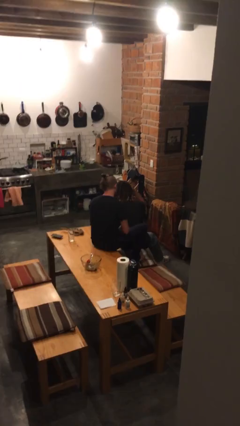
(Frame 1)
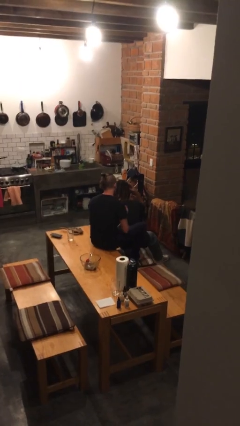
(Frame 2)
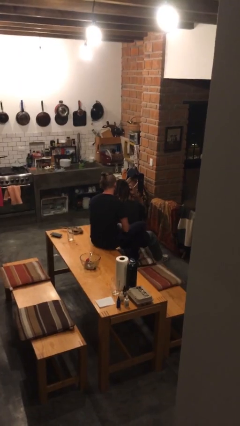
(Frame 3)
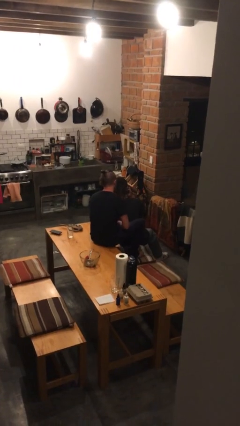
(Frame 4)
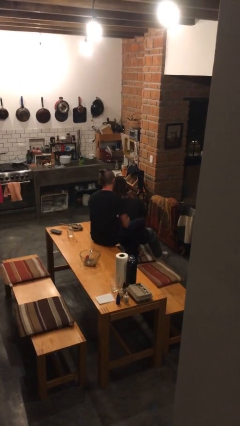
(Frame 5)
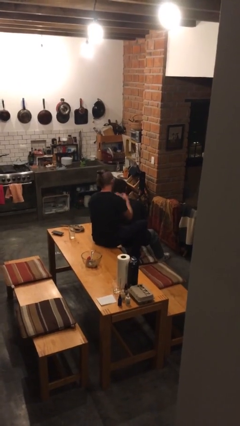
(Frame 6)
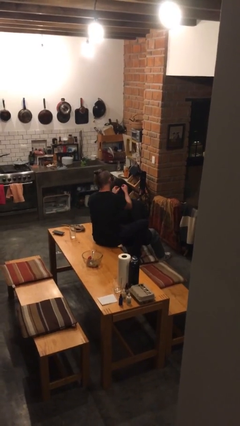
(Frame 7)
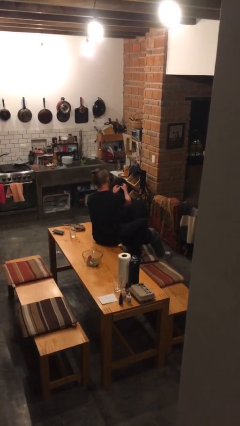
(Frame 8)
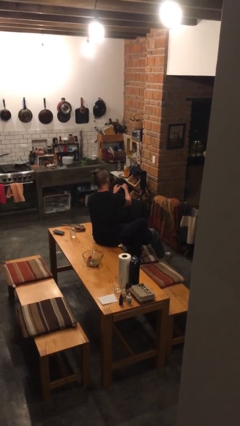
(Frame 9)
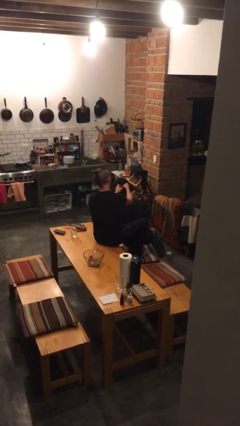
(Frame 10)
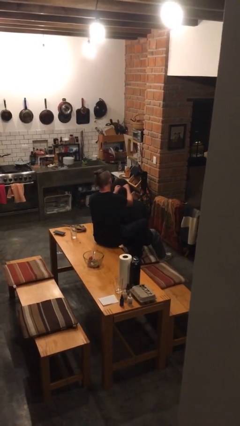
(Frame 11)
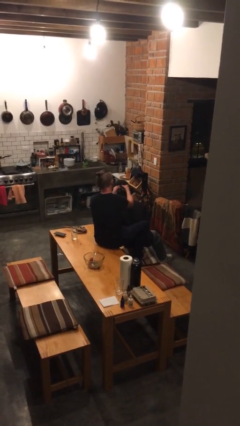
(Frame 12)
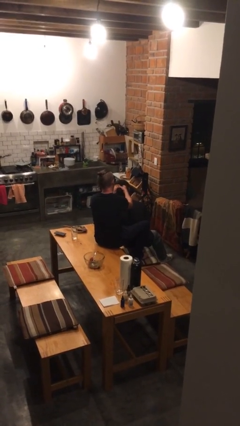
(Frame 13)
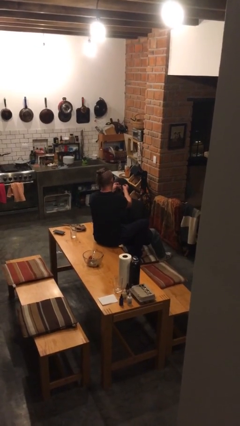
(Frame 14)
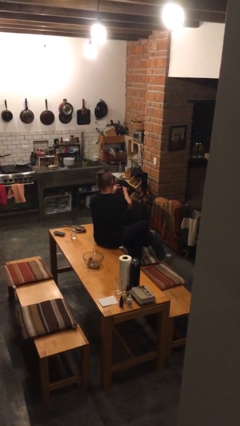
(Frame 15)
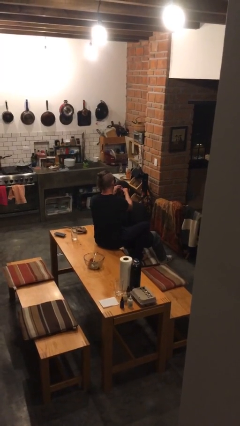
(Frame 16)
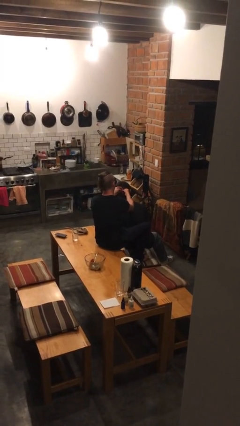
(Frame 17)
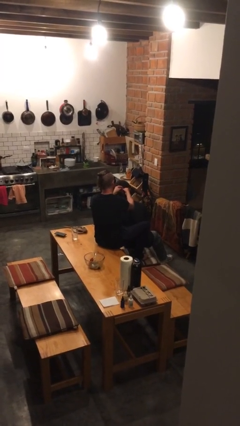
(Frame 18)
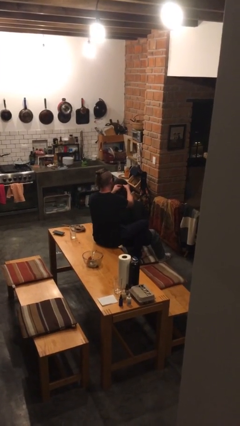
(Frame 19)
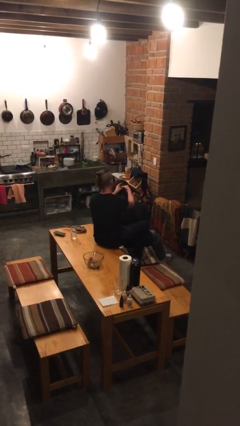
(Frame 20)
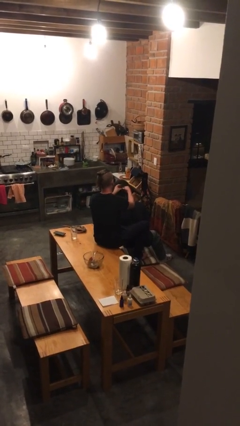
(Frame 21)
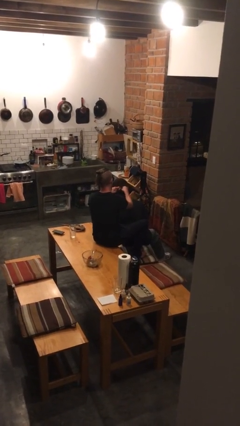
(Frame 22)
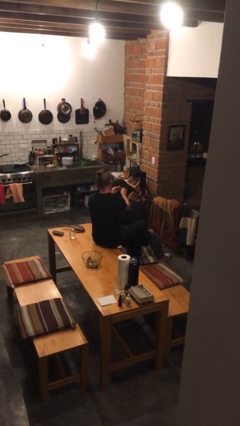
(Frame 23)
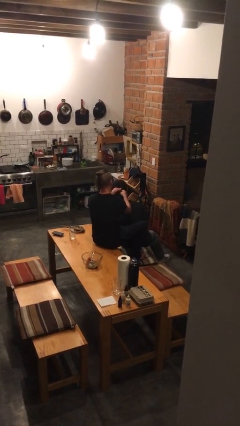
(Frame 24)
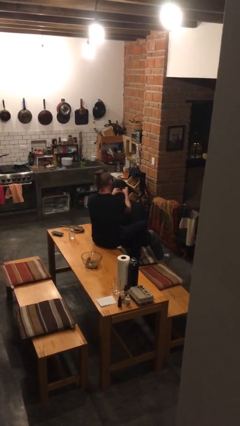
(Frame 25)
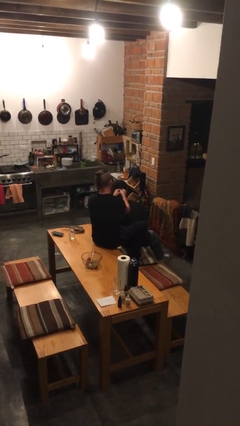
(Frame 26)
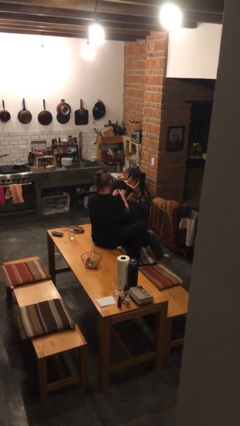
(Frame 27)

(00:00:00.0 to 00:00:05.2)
person braids hair of person

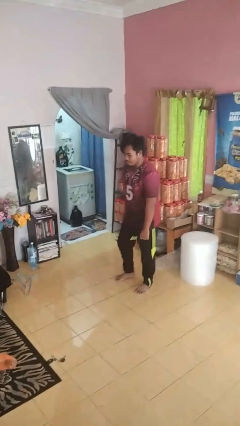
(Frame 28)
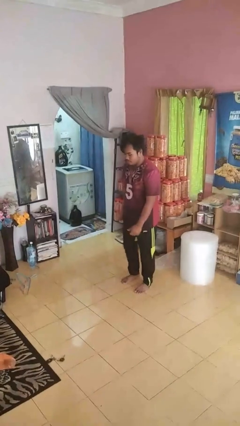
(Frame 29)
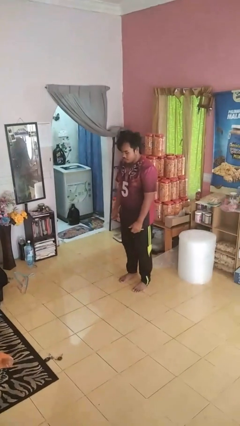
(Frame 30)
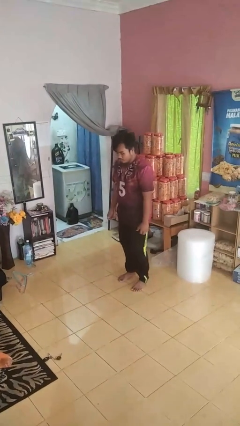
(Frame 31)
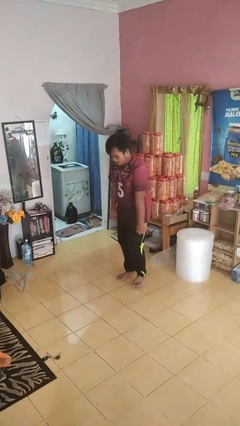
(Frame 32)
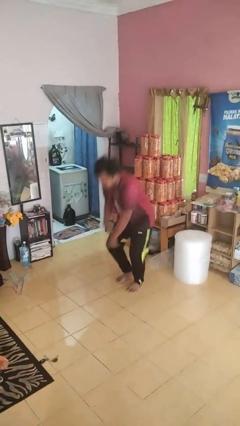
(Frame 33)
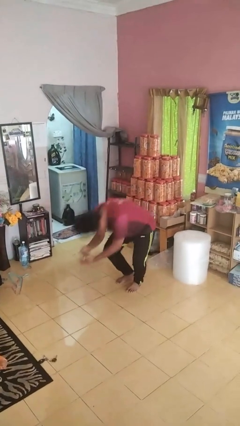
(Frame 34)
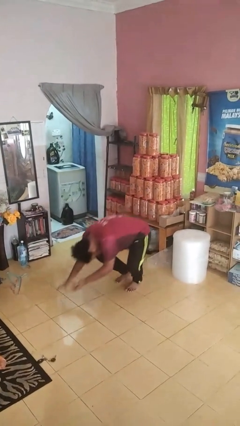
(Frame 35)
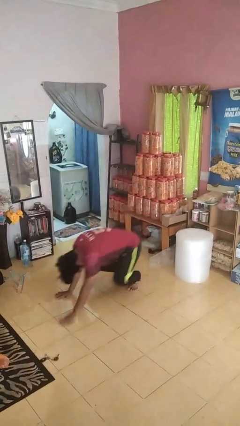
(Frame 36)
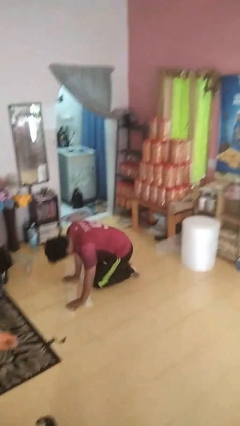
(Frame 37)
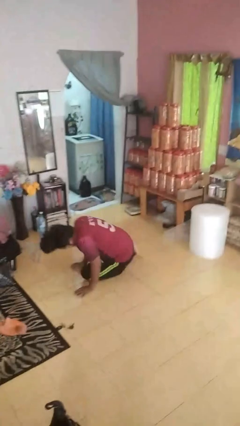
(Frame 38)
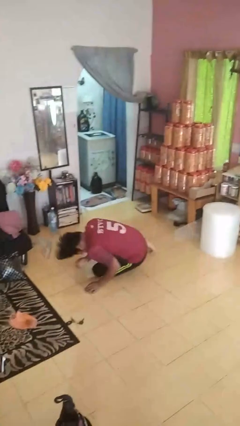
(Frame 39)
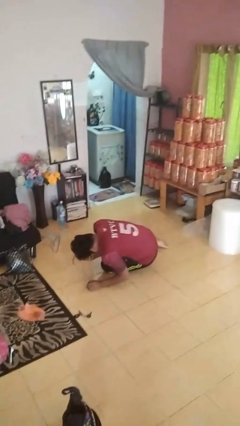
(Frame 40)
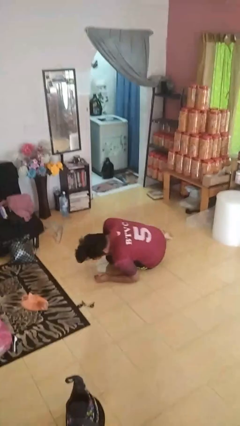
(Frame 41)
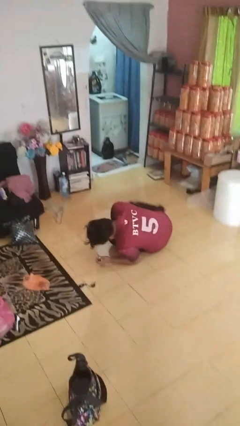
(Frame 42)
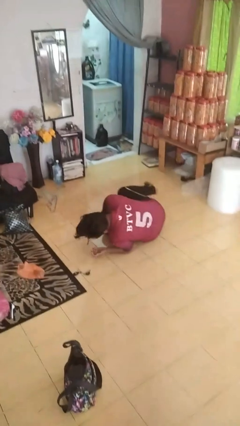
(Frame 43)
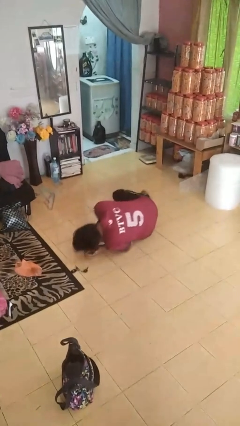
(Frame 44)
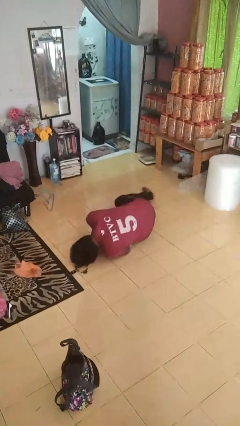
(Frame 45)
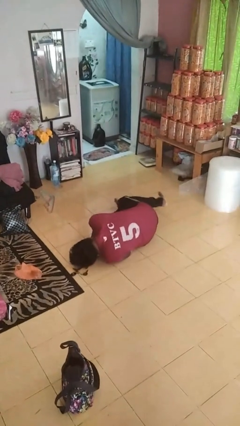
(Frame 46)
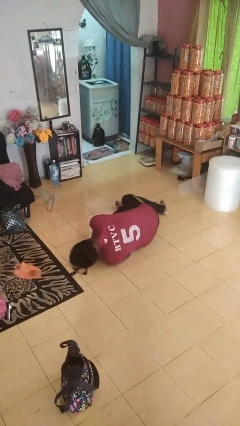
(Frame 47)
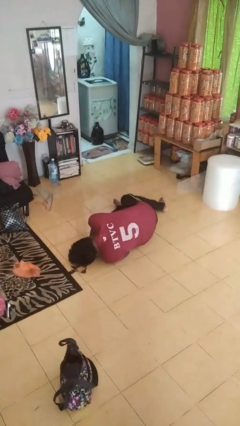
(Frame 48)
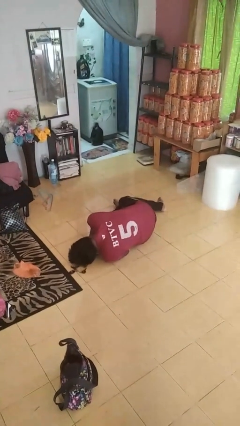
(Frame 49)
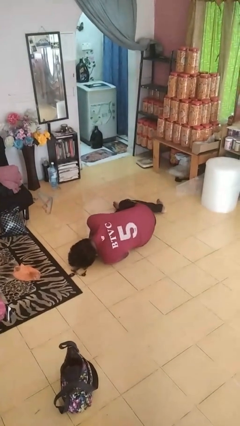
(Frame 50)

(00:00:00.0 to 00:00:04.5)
person falls while standing

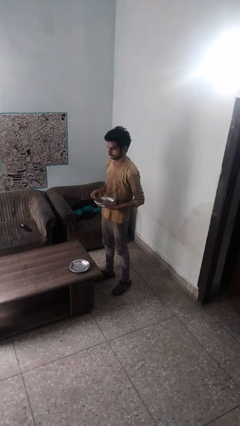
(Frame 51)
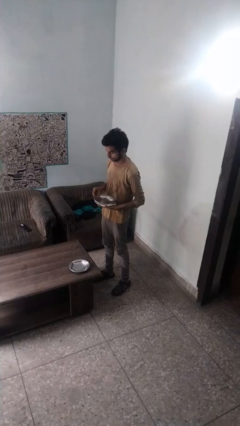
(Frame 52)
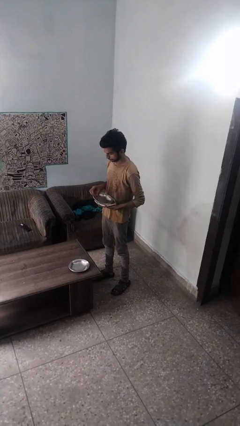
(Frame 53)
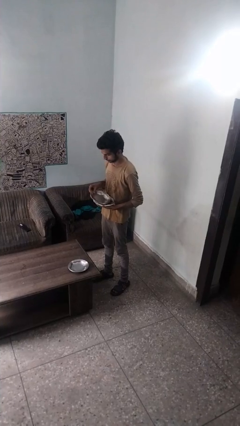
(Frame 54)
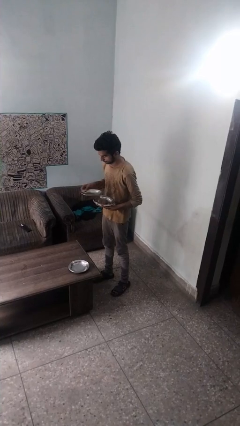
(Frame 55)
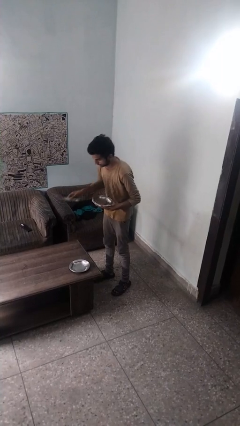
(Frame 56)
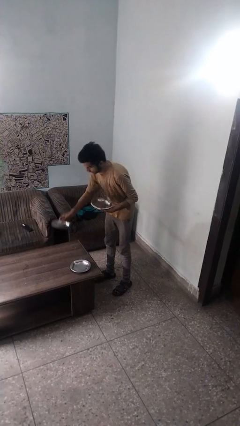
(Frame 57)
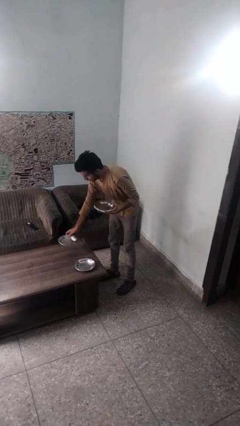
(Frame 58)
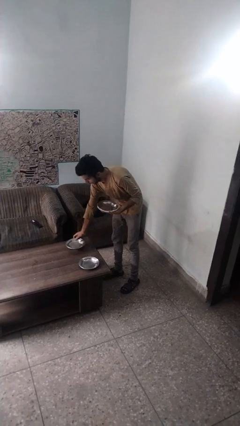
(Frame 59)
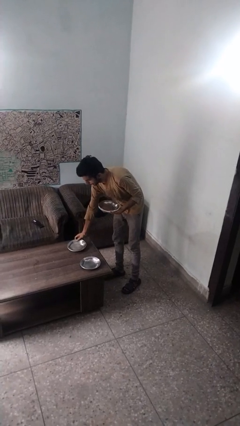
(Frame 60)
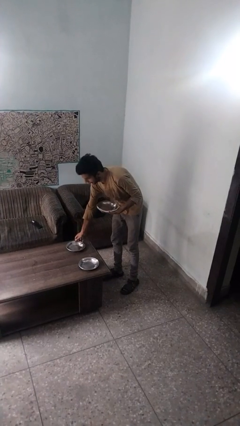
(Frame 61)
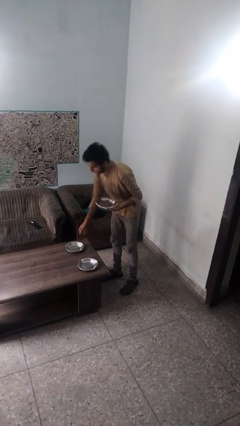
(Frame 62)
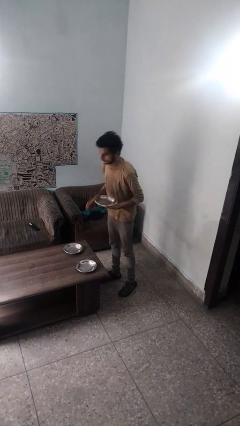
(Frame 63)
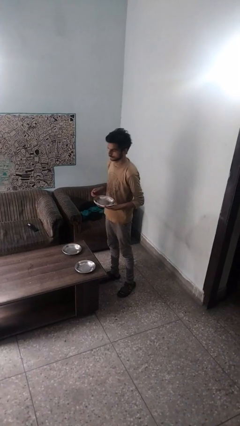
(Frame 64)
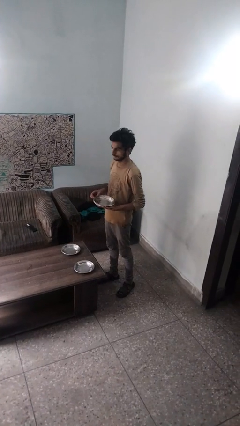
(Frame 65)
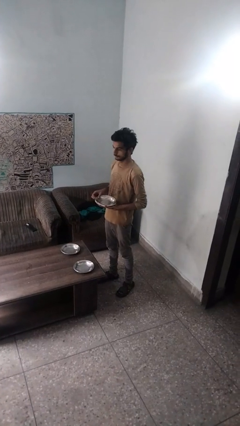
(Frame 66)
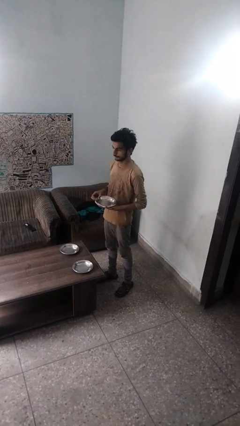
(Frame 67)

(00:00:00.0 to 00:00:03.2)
person sets table

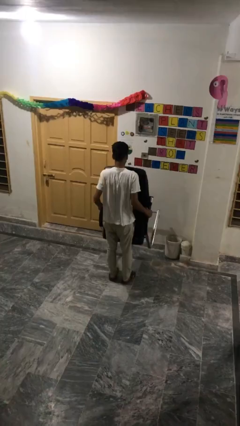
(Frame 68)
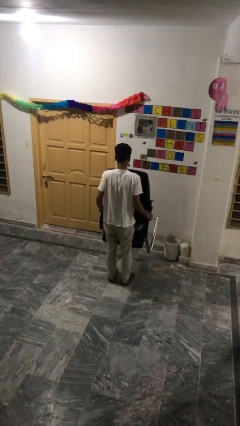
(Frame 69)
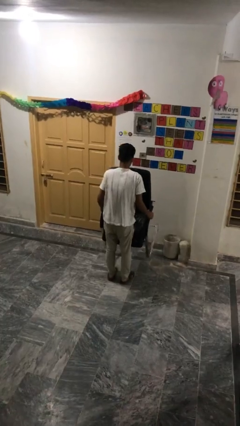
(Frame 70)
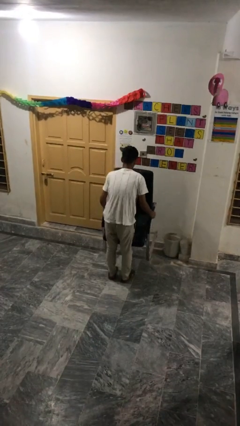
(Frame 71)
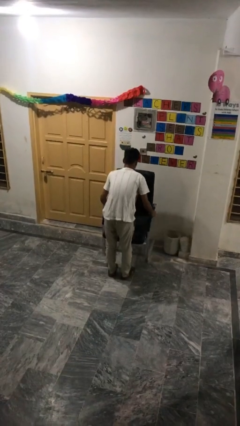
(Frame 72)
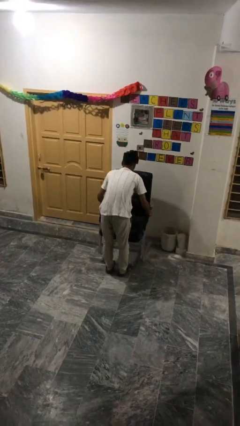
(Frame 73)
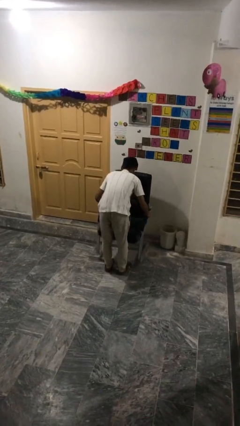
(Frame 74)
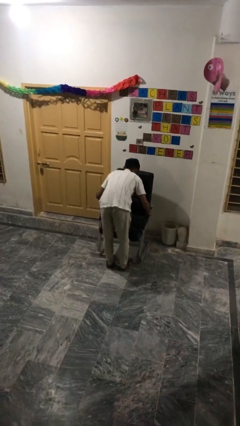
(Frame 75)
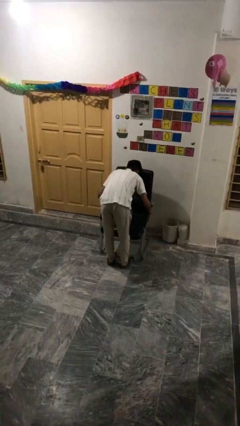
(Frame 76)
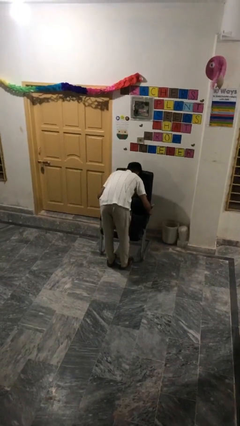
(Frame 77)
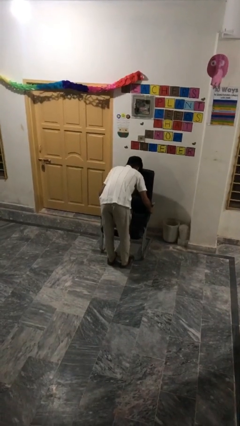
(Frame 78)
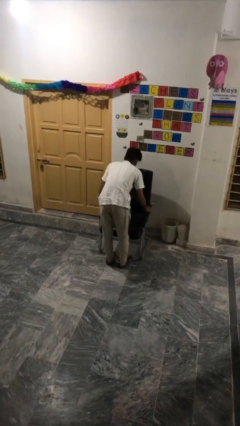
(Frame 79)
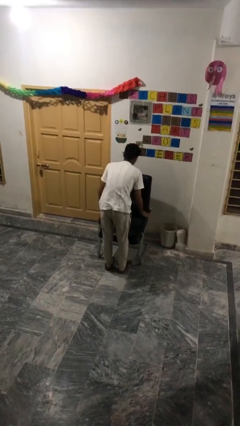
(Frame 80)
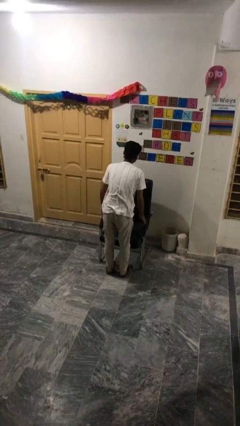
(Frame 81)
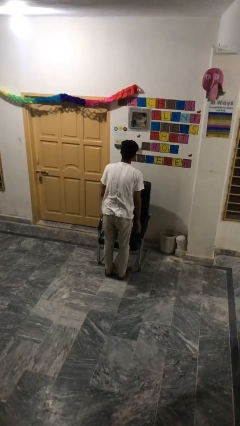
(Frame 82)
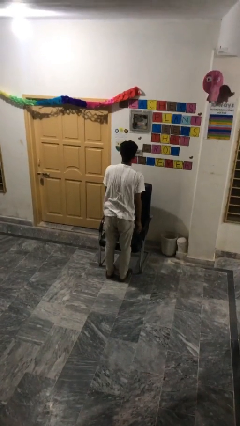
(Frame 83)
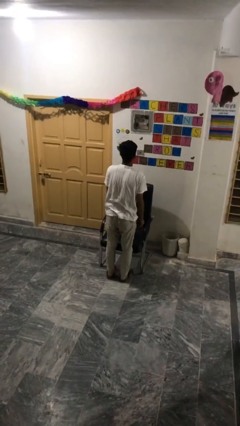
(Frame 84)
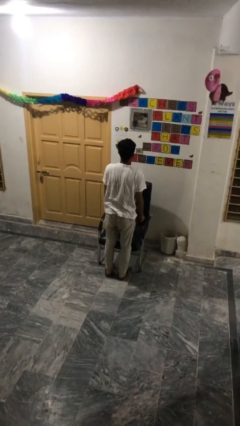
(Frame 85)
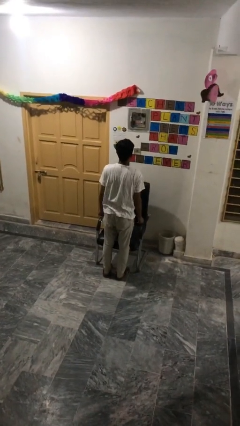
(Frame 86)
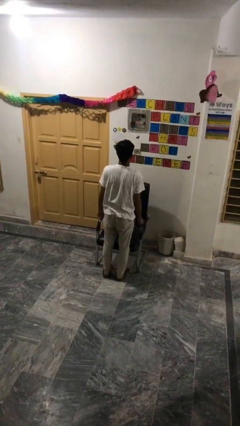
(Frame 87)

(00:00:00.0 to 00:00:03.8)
person puts down object on floor

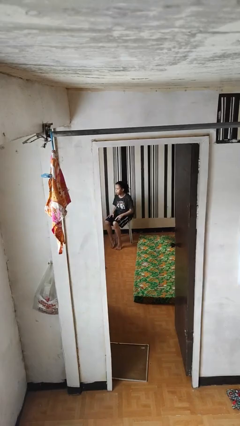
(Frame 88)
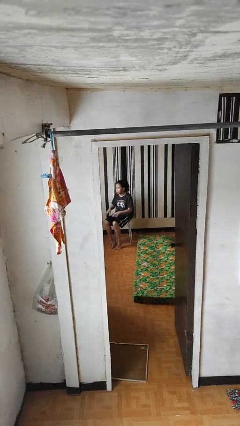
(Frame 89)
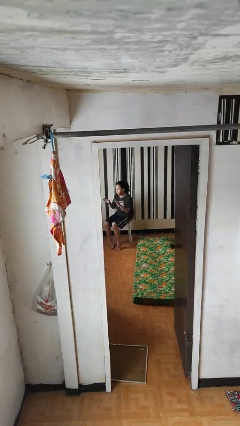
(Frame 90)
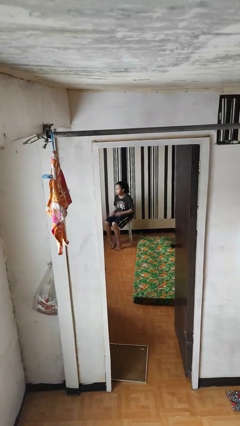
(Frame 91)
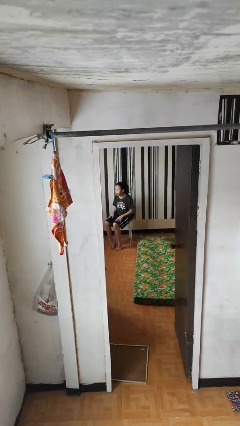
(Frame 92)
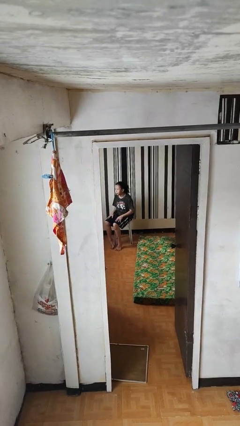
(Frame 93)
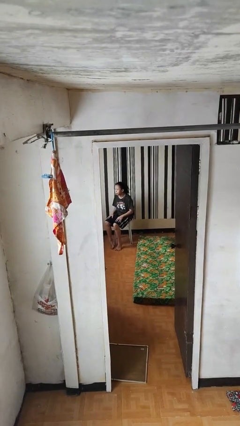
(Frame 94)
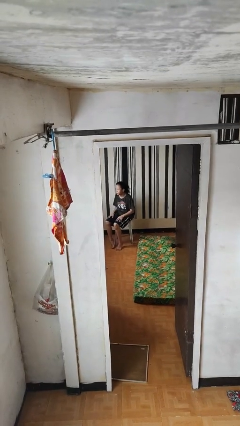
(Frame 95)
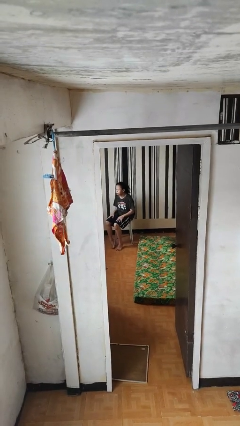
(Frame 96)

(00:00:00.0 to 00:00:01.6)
person slaps hands on thighs
